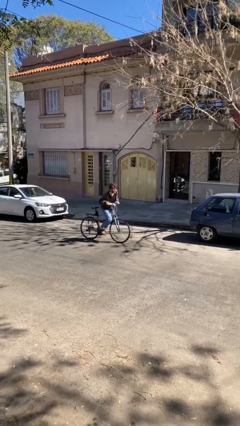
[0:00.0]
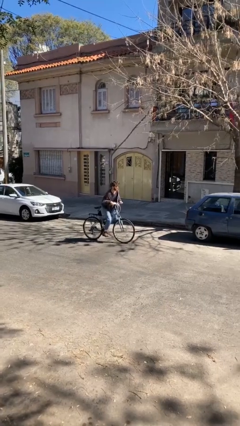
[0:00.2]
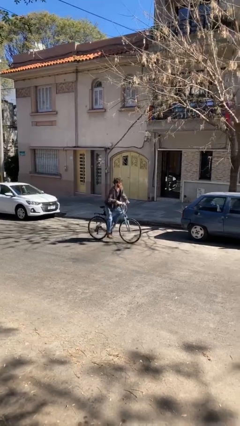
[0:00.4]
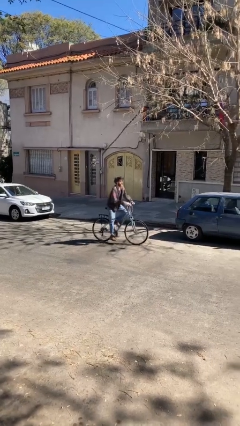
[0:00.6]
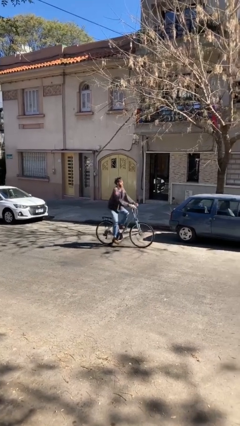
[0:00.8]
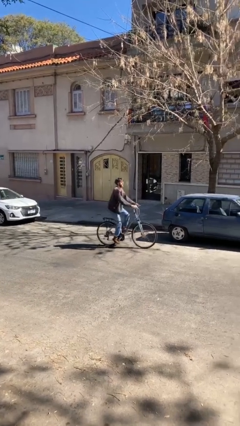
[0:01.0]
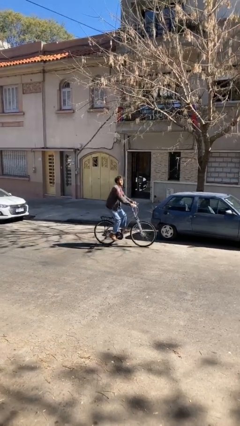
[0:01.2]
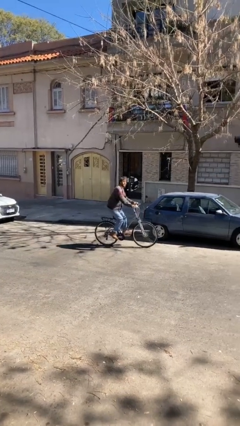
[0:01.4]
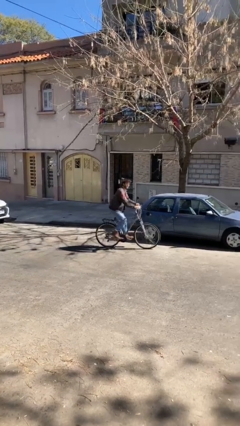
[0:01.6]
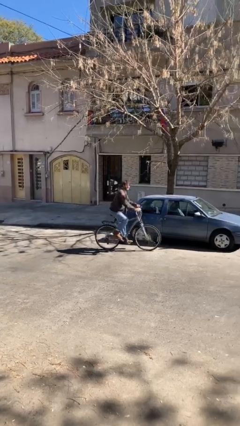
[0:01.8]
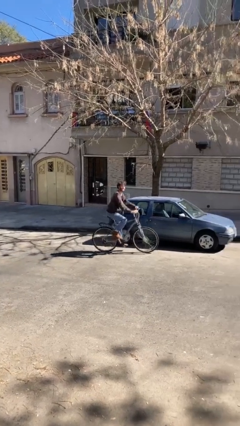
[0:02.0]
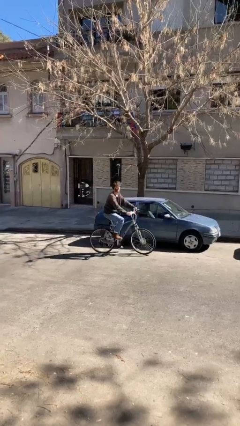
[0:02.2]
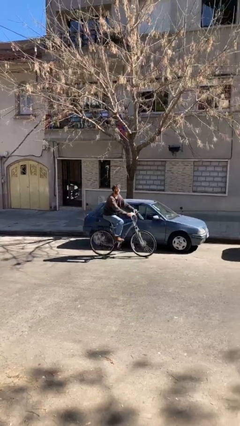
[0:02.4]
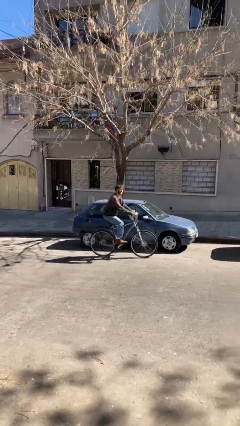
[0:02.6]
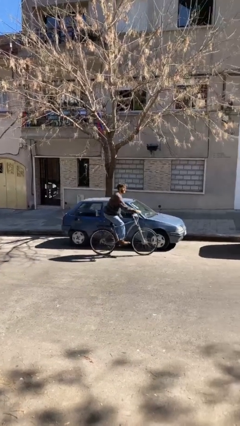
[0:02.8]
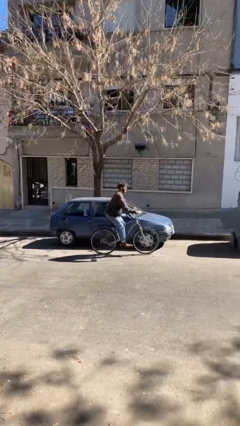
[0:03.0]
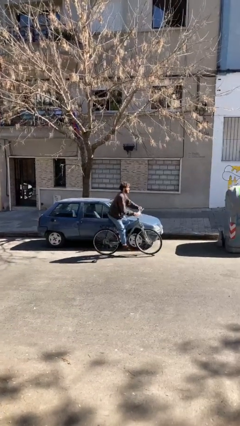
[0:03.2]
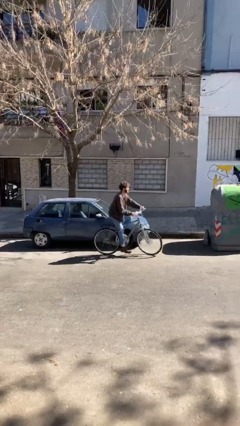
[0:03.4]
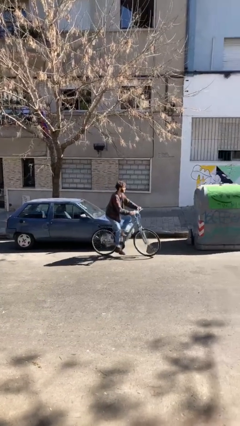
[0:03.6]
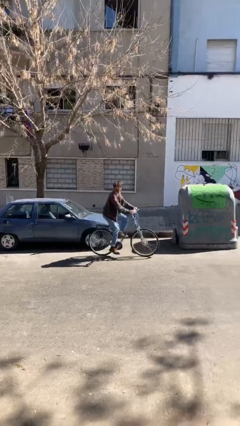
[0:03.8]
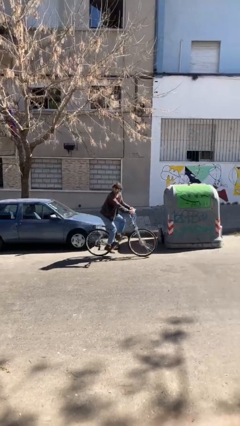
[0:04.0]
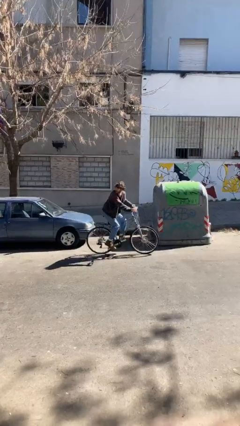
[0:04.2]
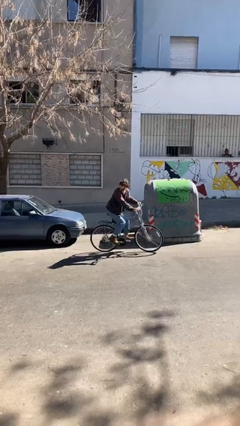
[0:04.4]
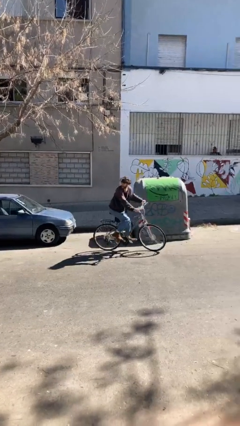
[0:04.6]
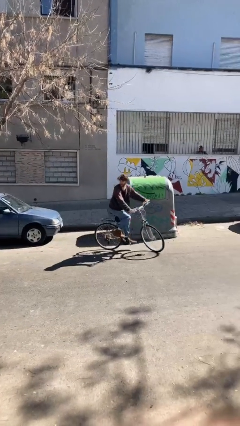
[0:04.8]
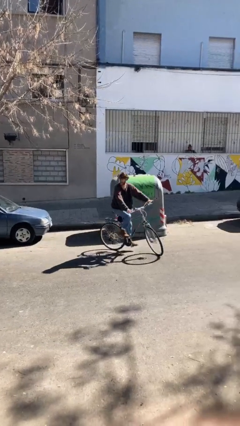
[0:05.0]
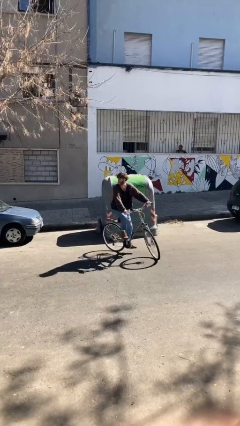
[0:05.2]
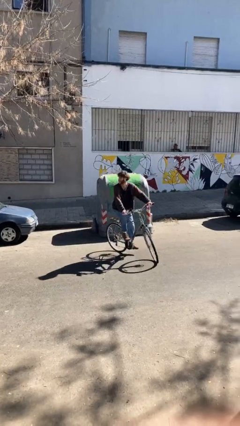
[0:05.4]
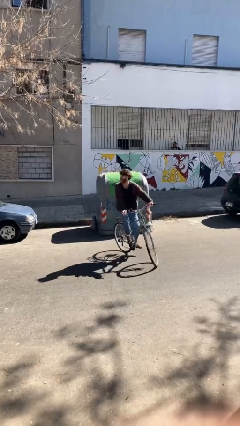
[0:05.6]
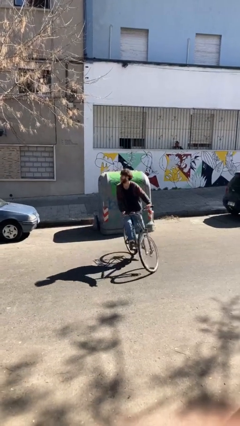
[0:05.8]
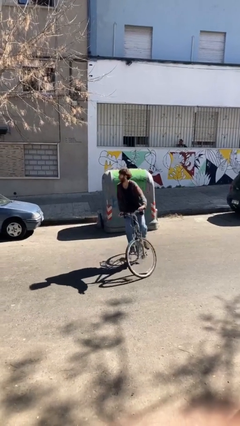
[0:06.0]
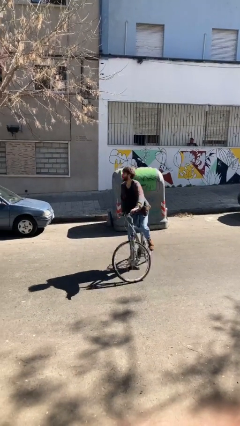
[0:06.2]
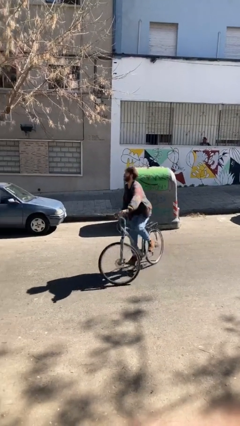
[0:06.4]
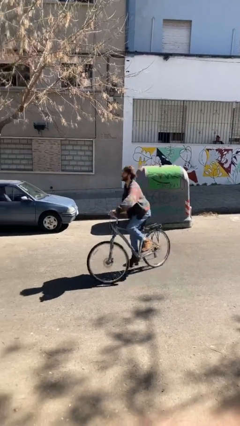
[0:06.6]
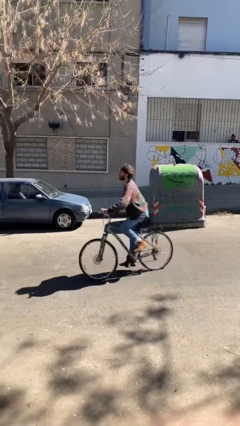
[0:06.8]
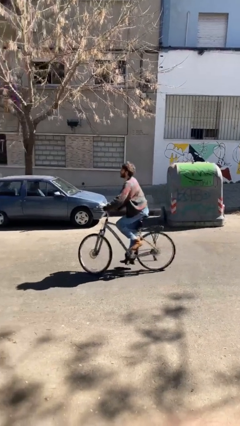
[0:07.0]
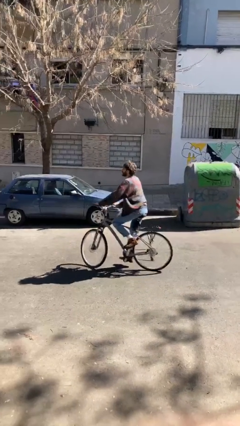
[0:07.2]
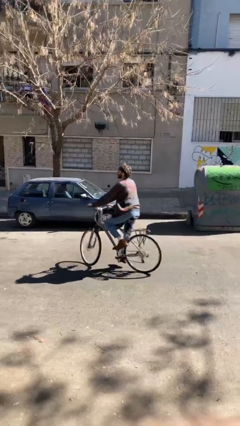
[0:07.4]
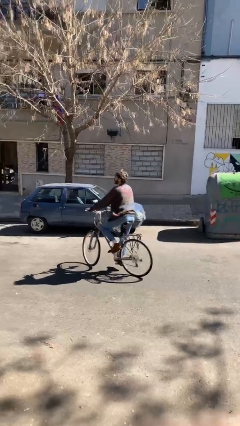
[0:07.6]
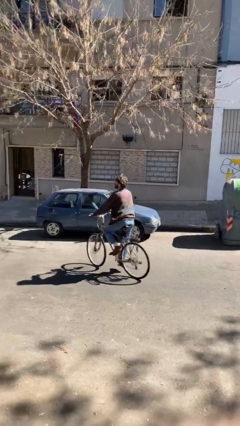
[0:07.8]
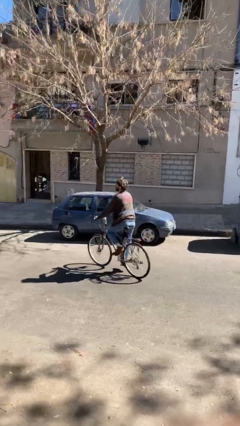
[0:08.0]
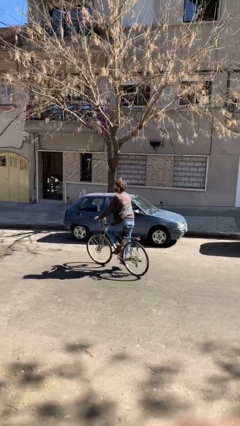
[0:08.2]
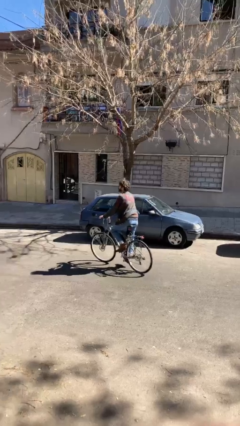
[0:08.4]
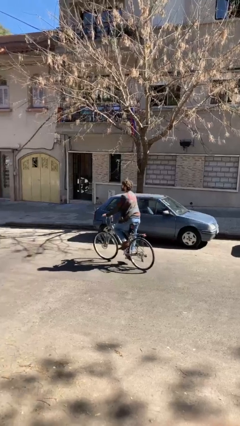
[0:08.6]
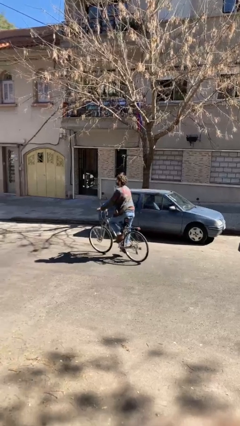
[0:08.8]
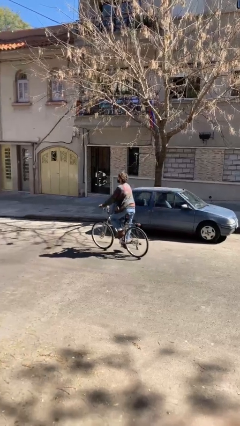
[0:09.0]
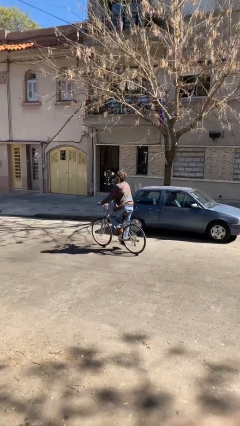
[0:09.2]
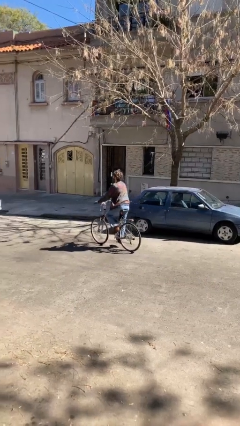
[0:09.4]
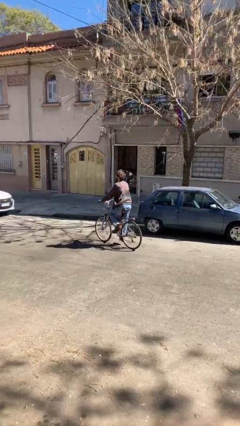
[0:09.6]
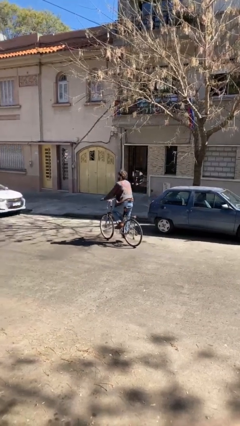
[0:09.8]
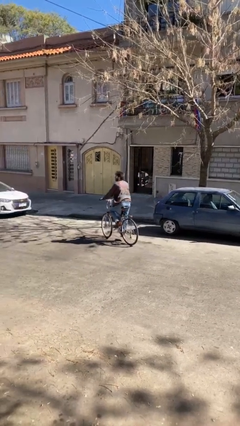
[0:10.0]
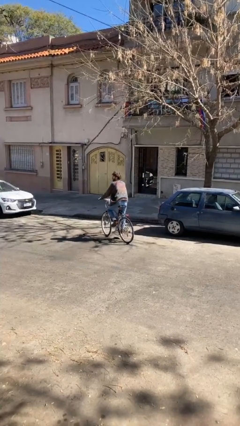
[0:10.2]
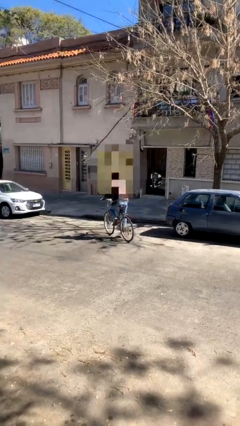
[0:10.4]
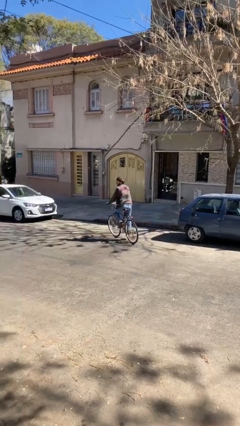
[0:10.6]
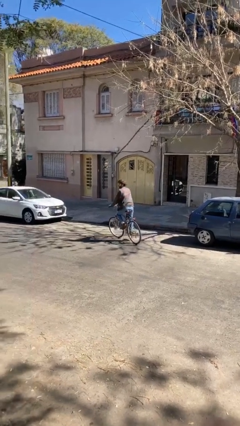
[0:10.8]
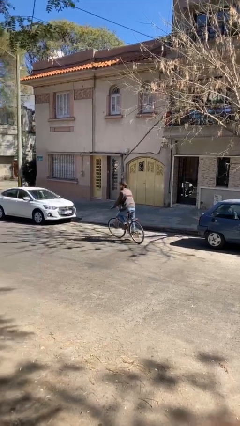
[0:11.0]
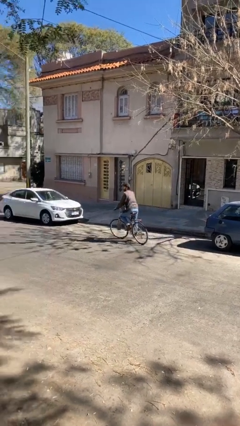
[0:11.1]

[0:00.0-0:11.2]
person rides bicycle

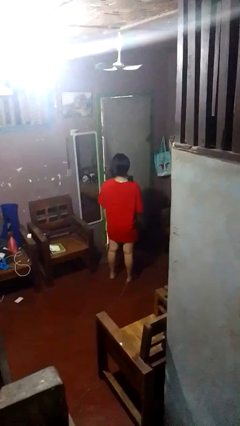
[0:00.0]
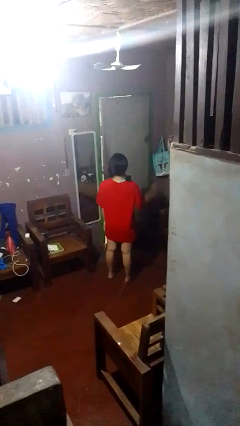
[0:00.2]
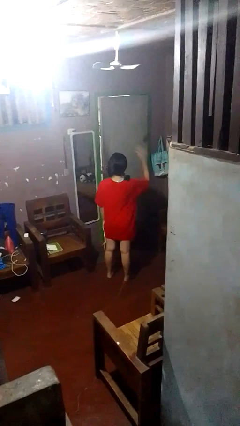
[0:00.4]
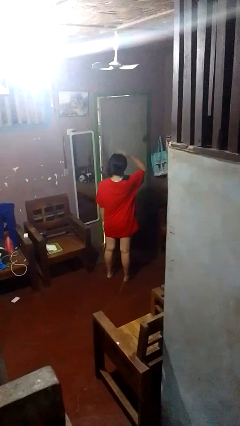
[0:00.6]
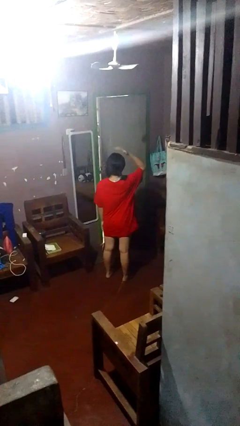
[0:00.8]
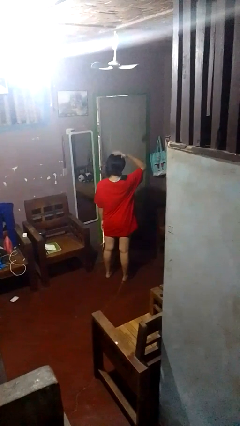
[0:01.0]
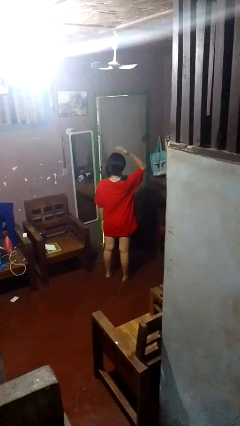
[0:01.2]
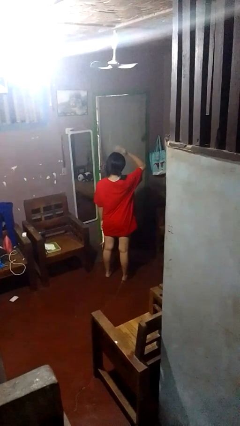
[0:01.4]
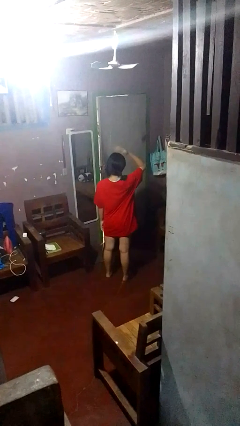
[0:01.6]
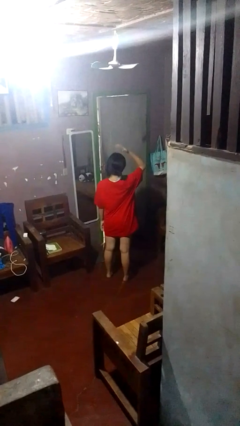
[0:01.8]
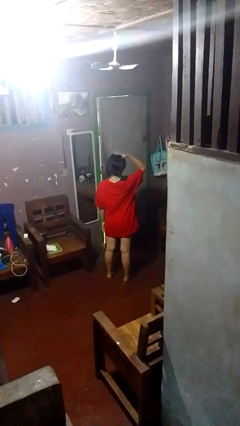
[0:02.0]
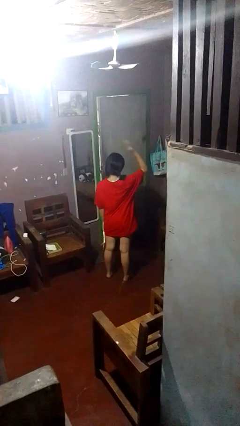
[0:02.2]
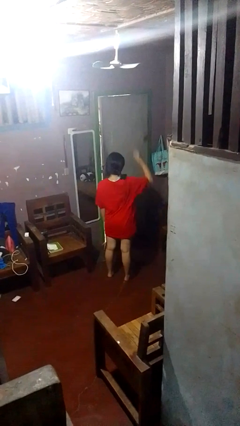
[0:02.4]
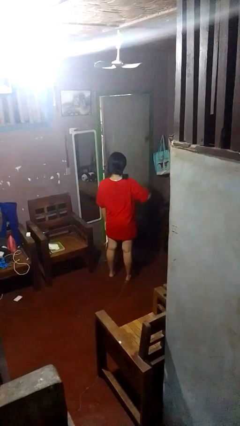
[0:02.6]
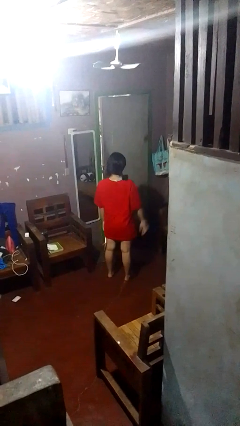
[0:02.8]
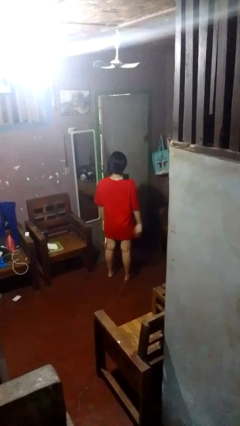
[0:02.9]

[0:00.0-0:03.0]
person pats head

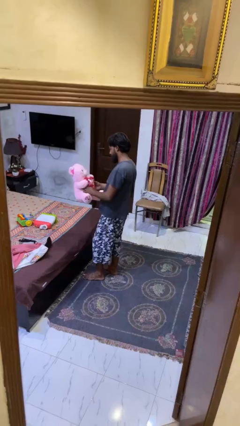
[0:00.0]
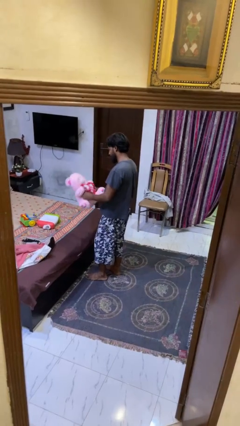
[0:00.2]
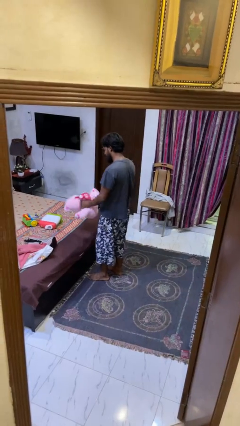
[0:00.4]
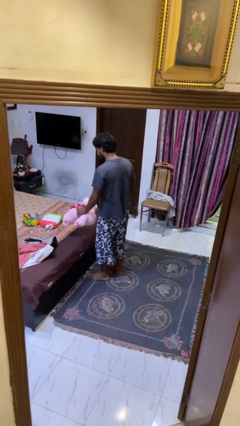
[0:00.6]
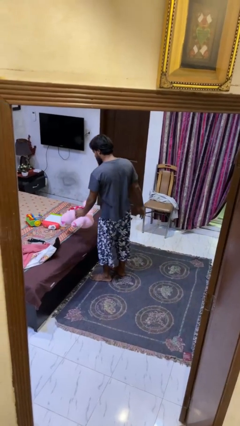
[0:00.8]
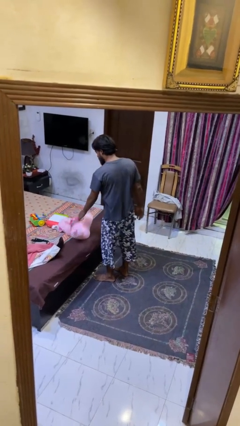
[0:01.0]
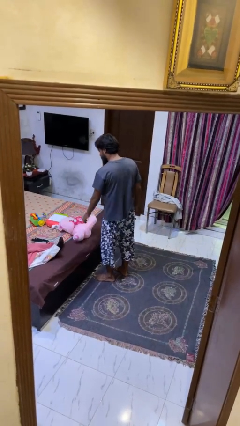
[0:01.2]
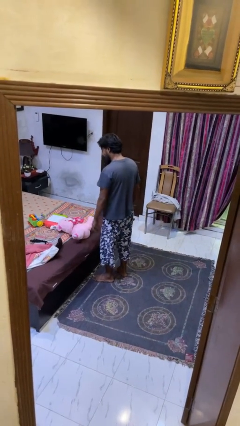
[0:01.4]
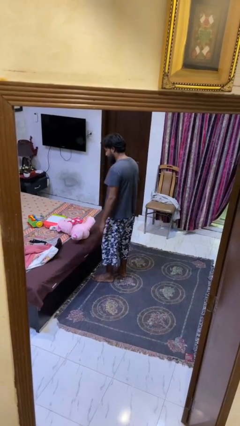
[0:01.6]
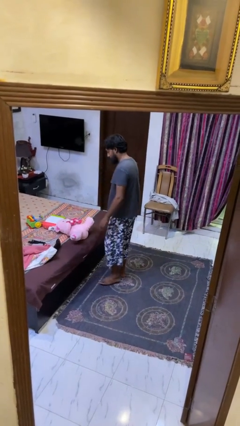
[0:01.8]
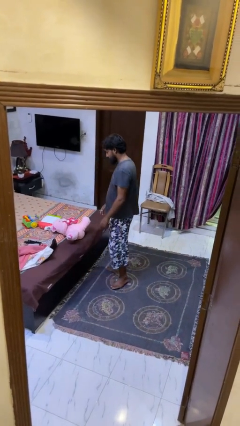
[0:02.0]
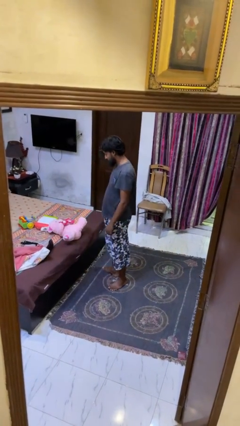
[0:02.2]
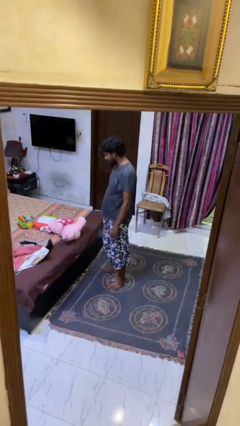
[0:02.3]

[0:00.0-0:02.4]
person puts down object on bed

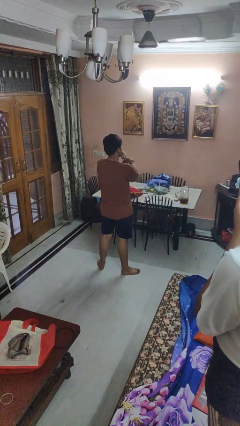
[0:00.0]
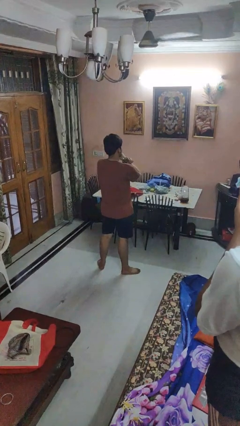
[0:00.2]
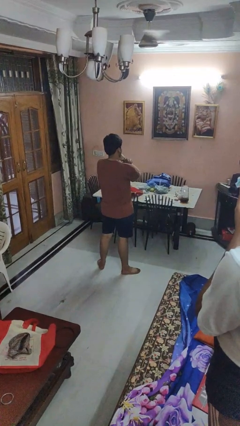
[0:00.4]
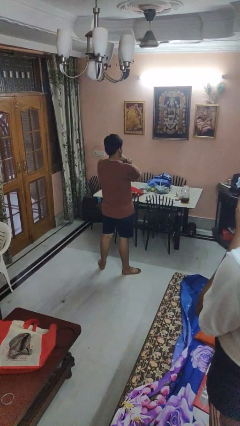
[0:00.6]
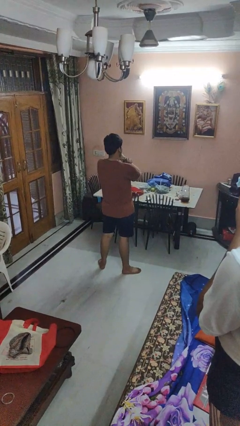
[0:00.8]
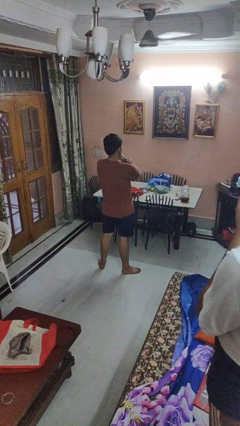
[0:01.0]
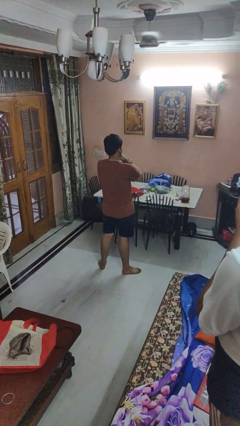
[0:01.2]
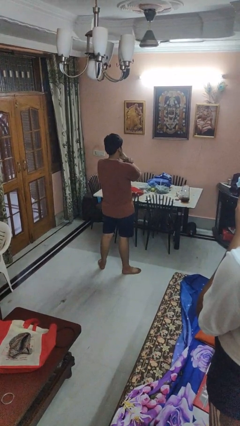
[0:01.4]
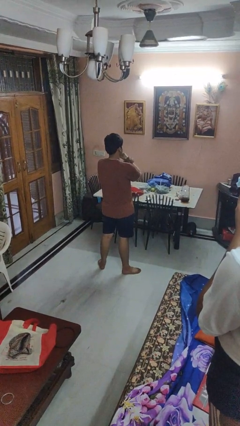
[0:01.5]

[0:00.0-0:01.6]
person gestures arms x
